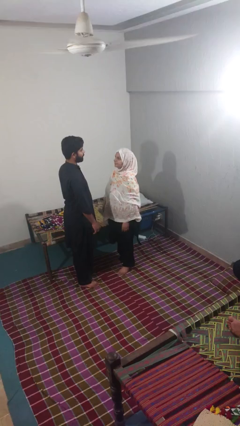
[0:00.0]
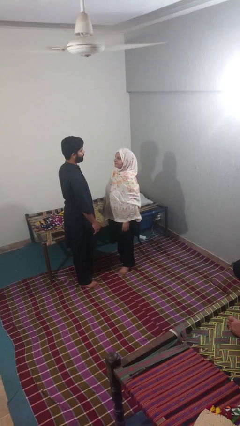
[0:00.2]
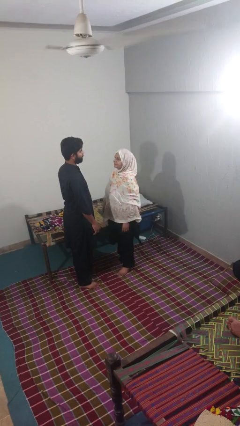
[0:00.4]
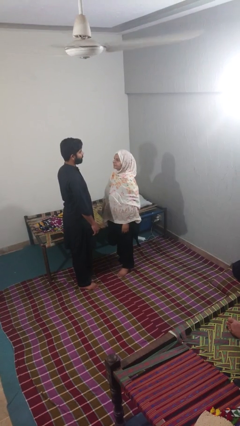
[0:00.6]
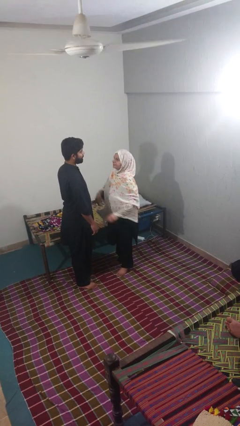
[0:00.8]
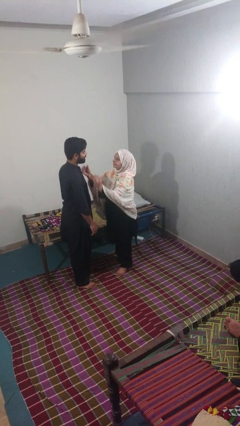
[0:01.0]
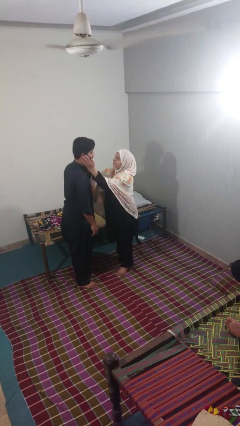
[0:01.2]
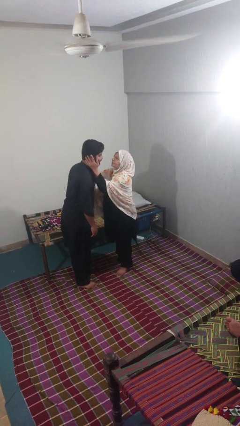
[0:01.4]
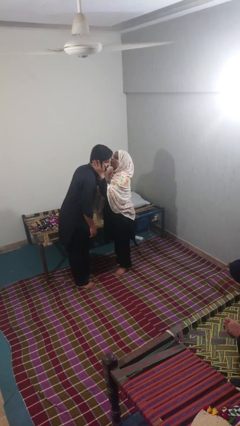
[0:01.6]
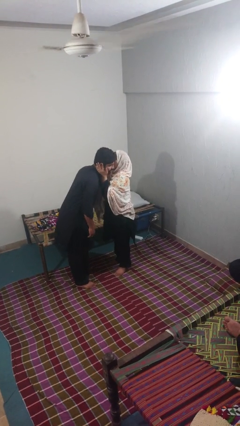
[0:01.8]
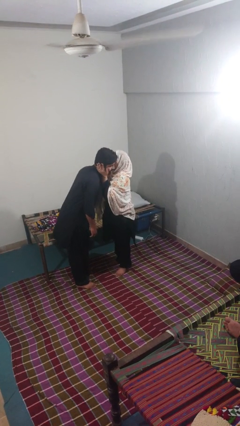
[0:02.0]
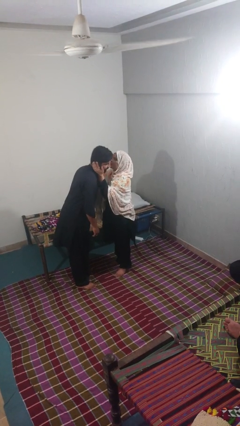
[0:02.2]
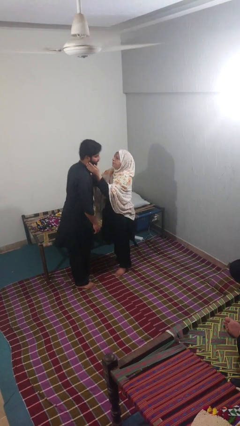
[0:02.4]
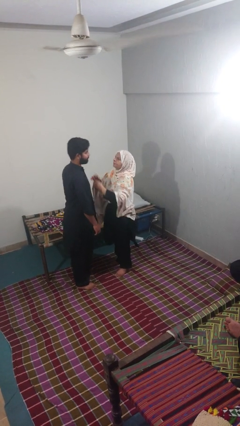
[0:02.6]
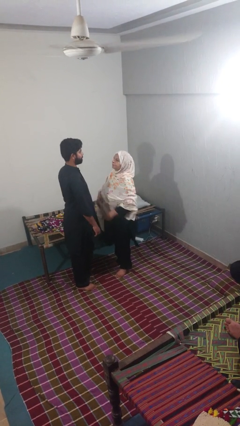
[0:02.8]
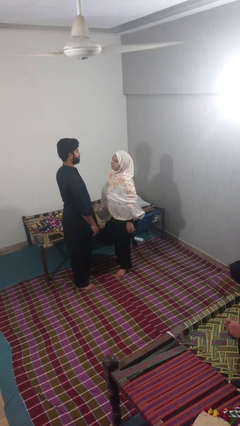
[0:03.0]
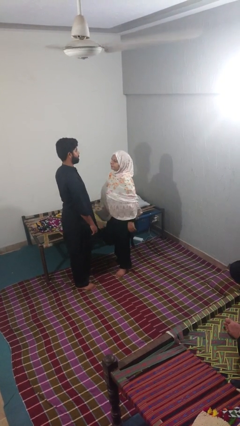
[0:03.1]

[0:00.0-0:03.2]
person kisses cheek of person

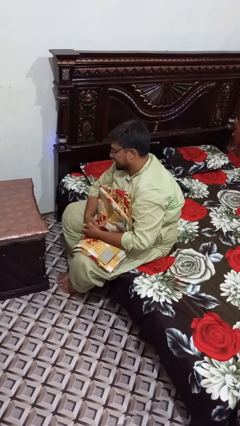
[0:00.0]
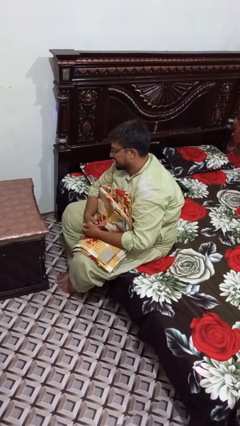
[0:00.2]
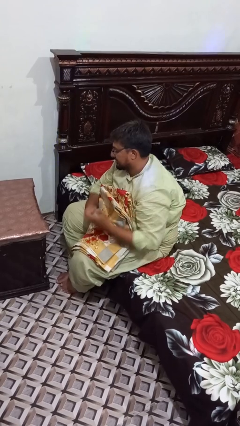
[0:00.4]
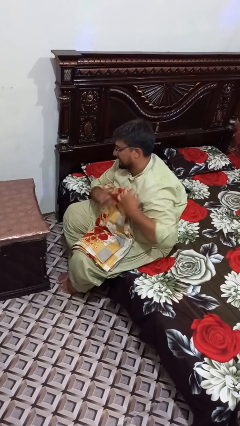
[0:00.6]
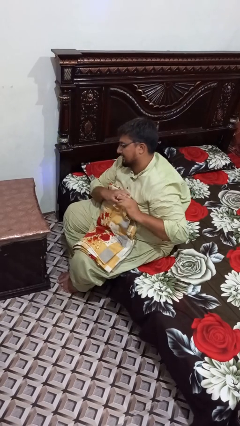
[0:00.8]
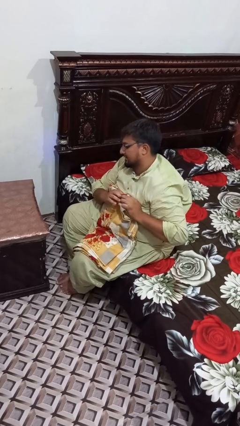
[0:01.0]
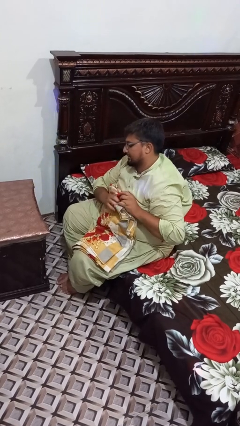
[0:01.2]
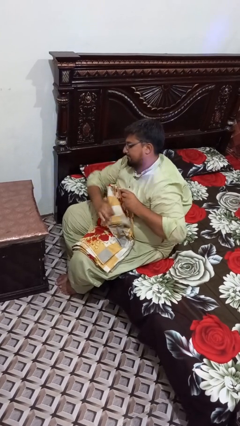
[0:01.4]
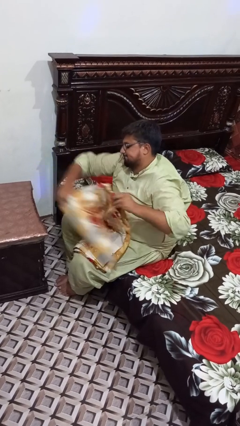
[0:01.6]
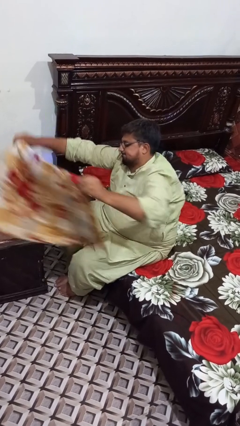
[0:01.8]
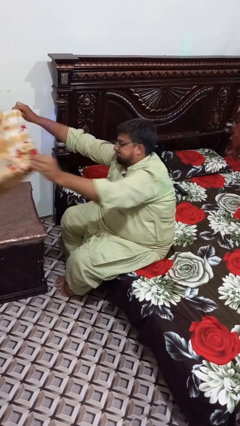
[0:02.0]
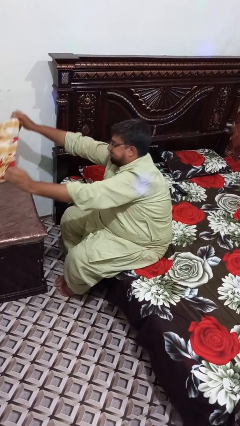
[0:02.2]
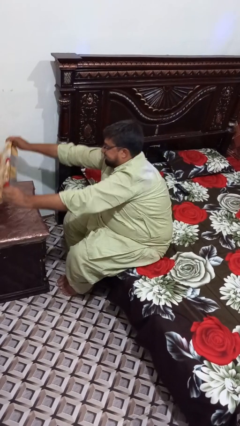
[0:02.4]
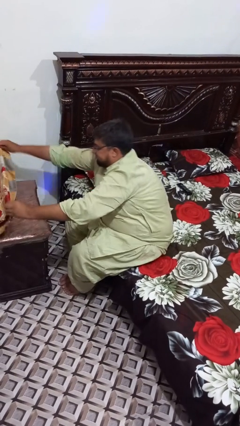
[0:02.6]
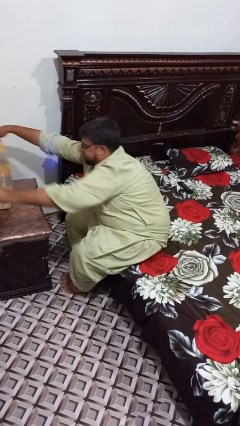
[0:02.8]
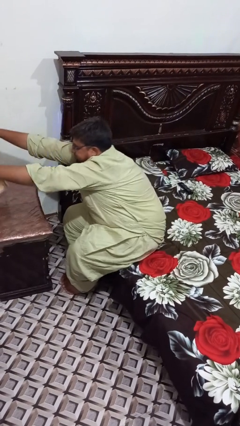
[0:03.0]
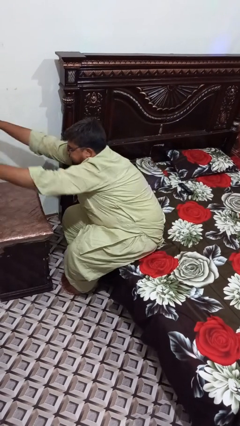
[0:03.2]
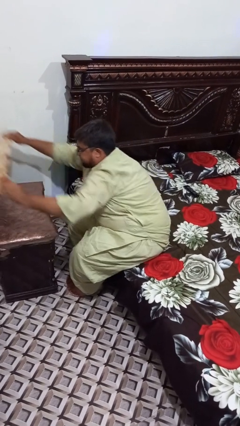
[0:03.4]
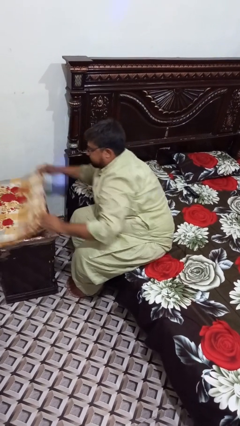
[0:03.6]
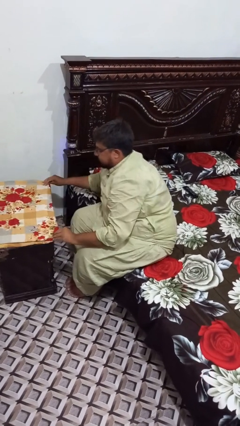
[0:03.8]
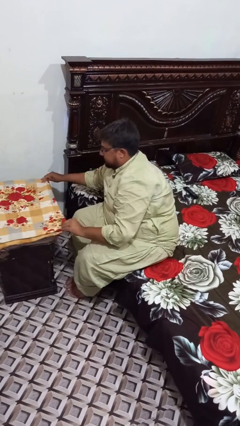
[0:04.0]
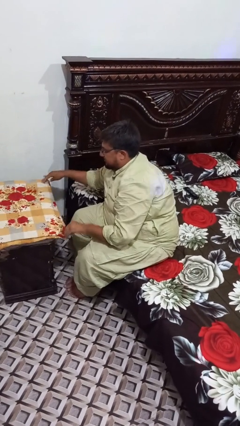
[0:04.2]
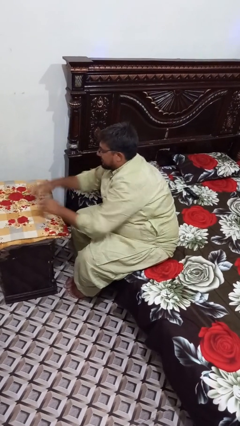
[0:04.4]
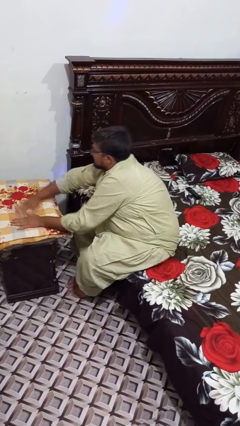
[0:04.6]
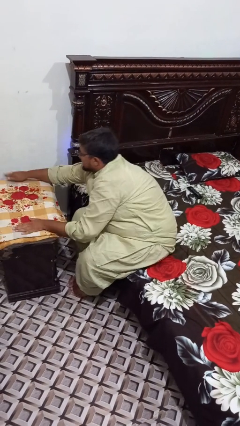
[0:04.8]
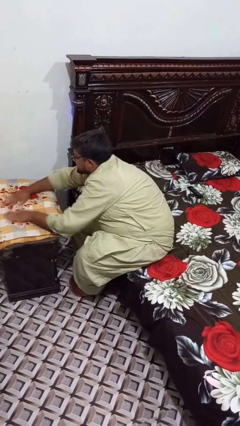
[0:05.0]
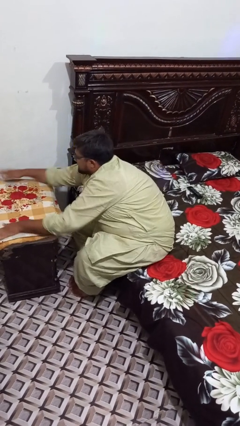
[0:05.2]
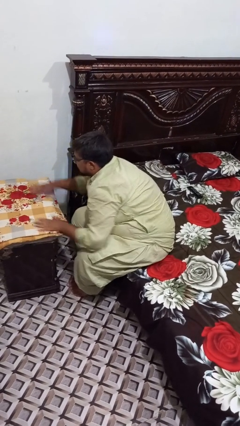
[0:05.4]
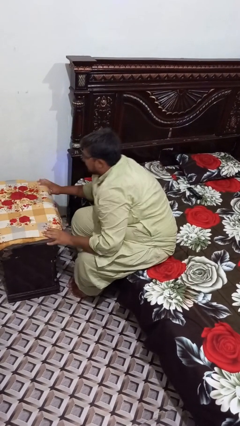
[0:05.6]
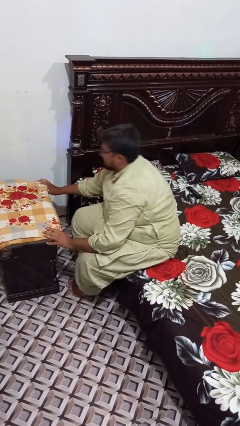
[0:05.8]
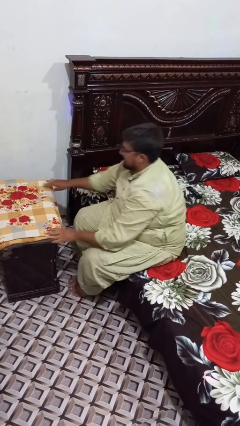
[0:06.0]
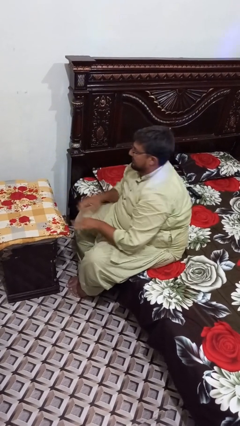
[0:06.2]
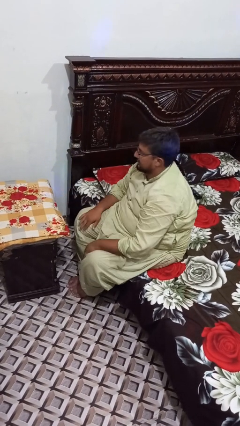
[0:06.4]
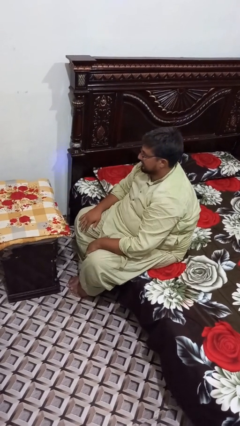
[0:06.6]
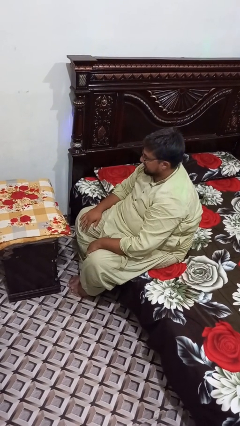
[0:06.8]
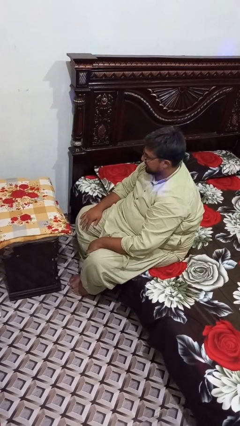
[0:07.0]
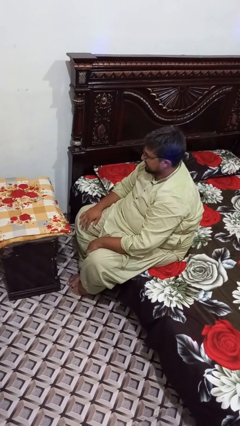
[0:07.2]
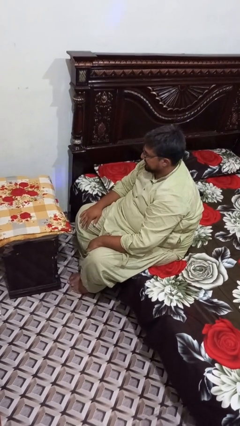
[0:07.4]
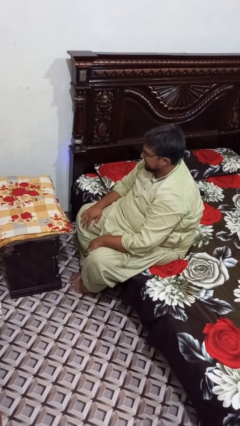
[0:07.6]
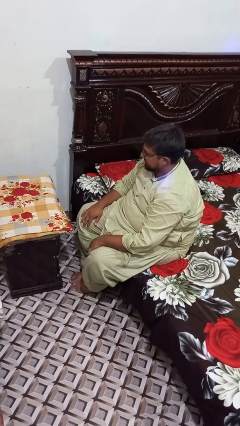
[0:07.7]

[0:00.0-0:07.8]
person spreads tablecloth

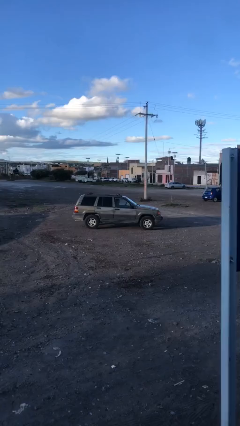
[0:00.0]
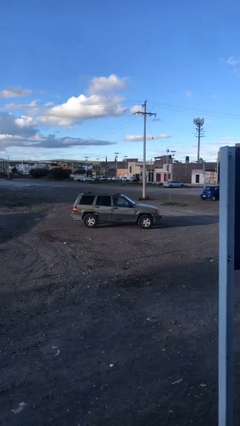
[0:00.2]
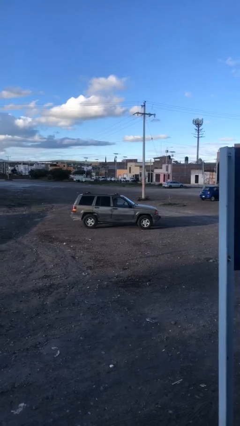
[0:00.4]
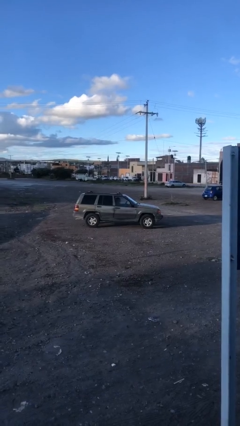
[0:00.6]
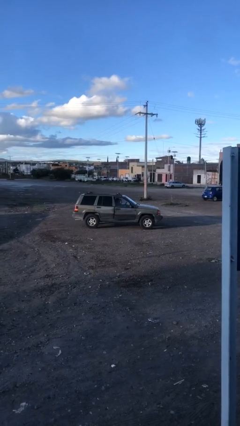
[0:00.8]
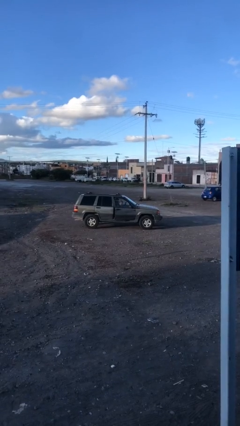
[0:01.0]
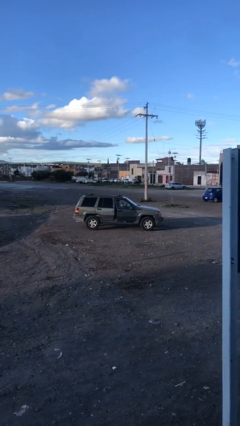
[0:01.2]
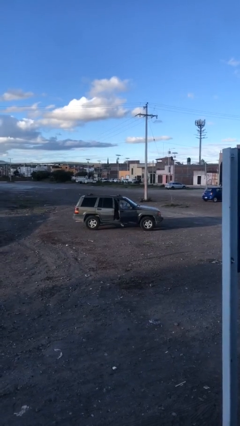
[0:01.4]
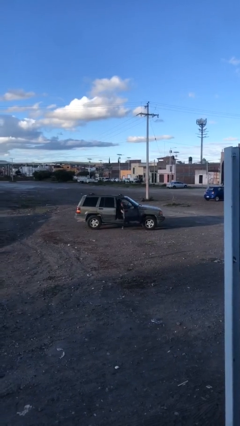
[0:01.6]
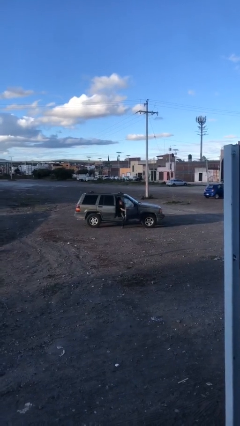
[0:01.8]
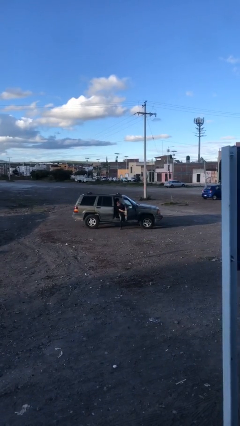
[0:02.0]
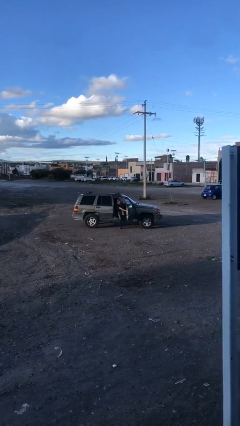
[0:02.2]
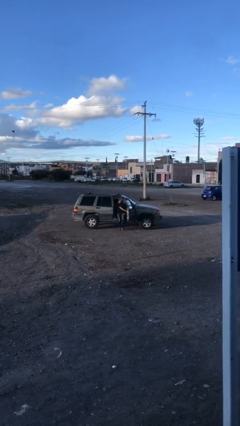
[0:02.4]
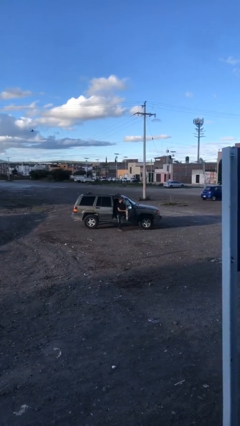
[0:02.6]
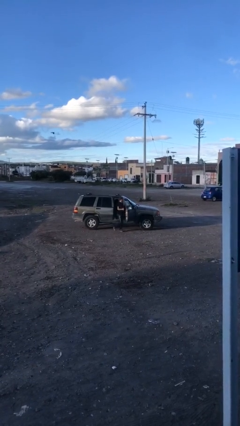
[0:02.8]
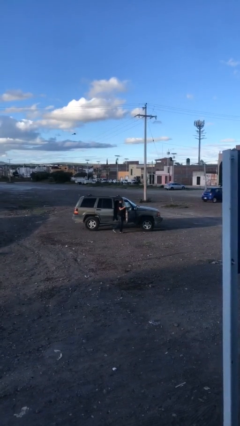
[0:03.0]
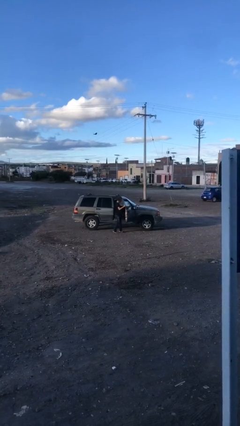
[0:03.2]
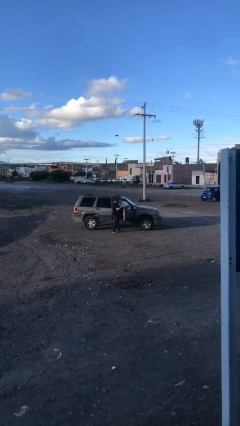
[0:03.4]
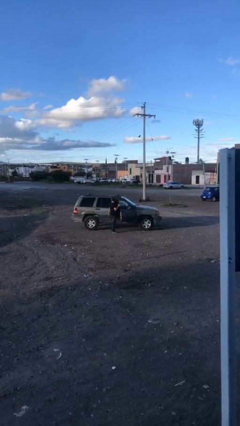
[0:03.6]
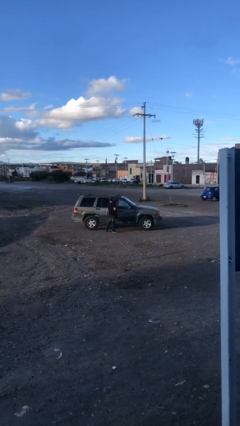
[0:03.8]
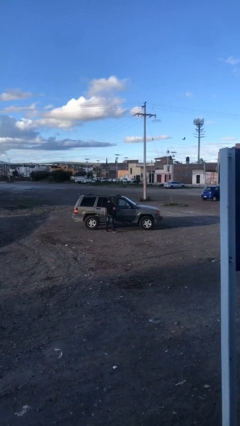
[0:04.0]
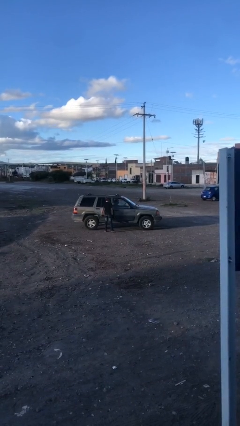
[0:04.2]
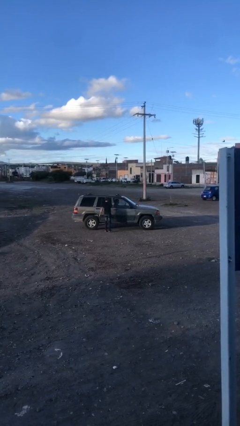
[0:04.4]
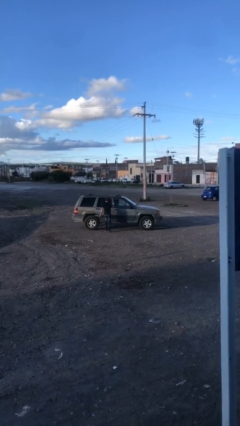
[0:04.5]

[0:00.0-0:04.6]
car drops off person

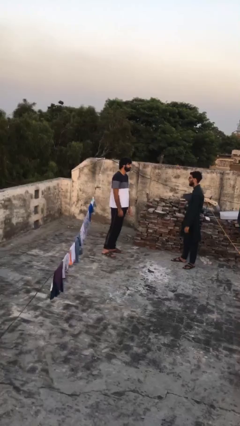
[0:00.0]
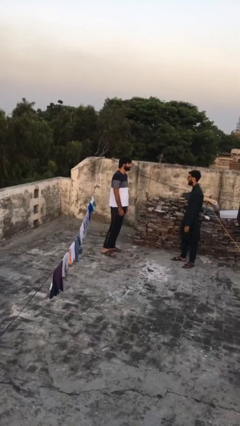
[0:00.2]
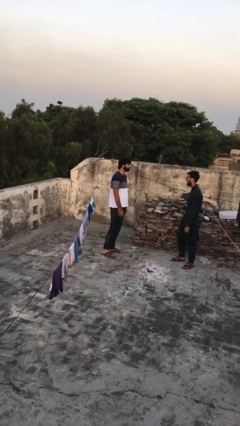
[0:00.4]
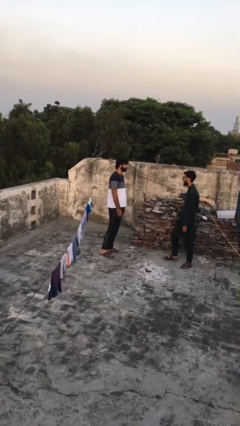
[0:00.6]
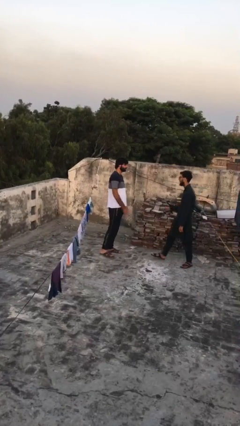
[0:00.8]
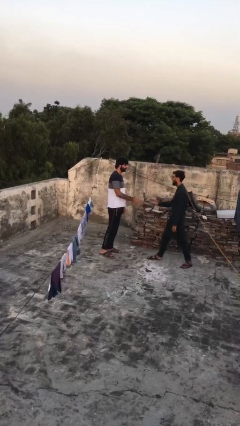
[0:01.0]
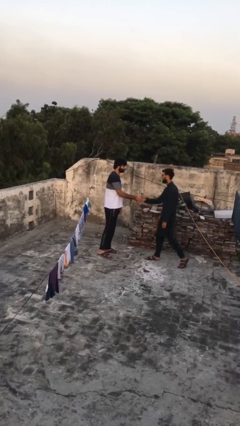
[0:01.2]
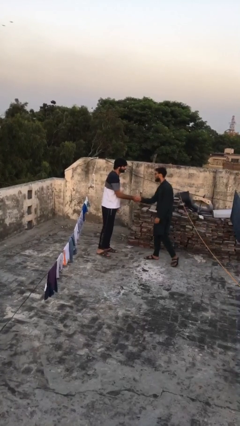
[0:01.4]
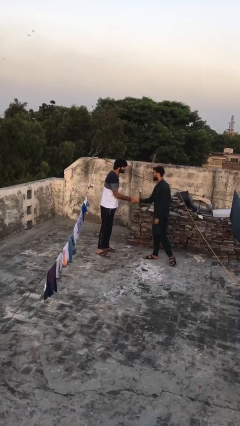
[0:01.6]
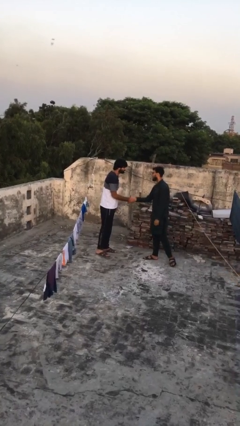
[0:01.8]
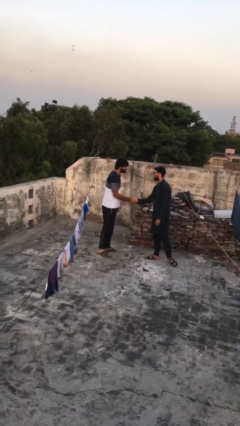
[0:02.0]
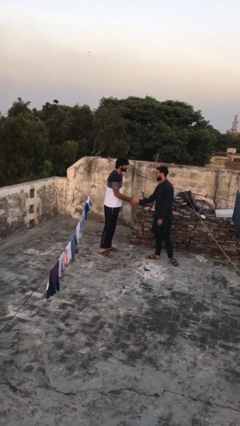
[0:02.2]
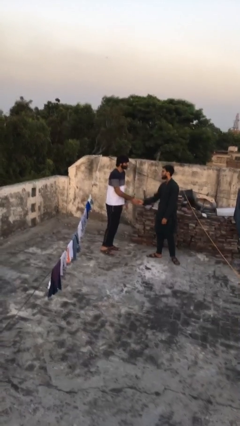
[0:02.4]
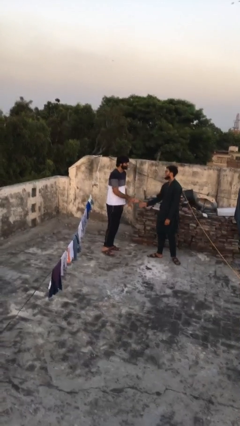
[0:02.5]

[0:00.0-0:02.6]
person shakes hand
